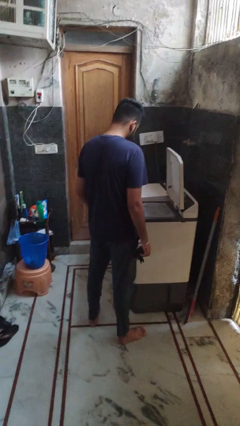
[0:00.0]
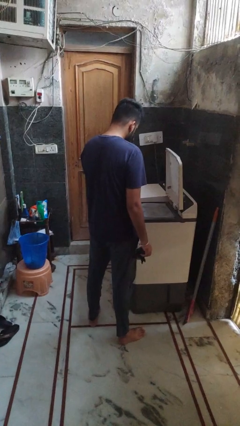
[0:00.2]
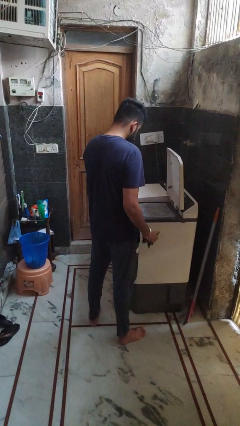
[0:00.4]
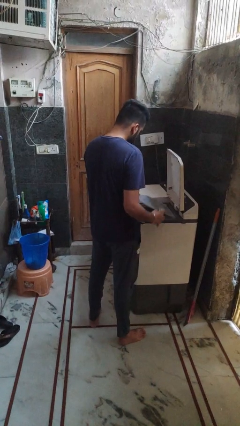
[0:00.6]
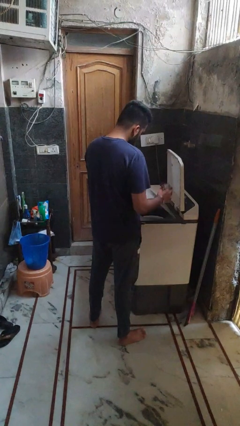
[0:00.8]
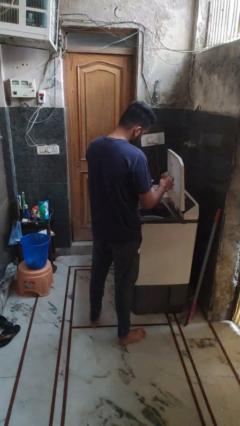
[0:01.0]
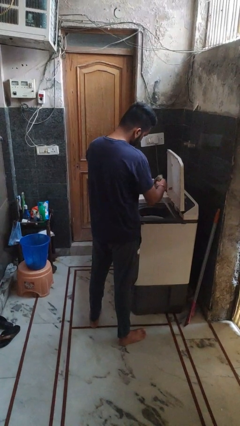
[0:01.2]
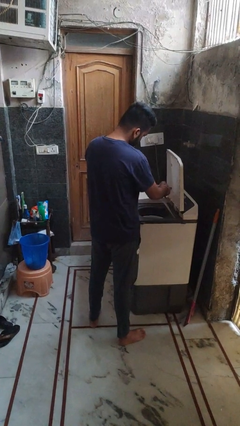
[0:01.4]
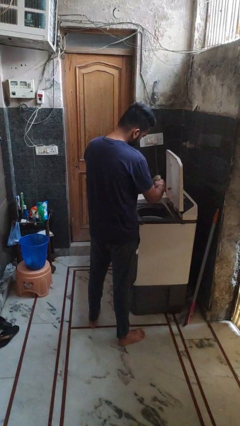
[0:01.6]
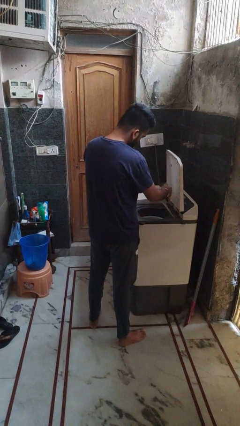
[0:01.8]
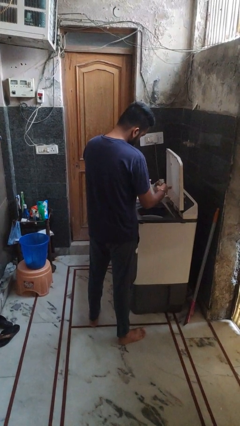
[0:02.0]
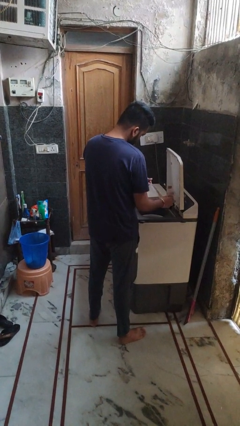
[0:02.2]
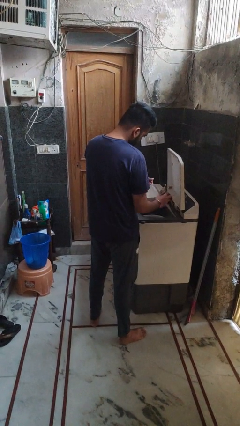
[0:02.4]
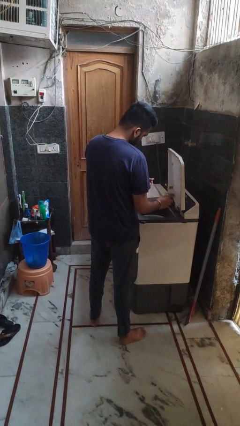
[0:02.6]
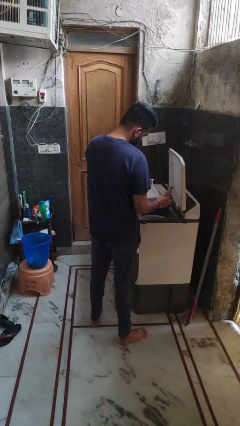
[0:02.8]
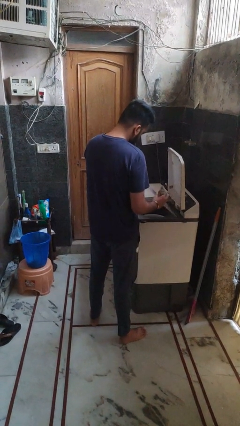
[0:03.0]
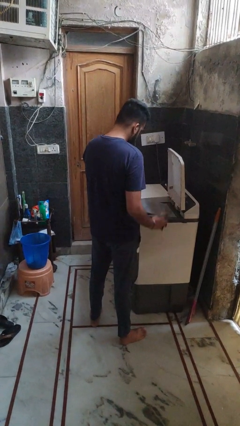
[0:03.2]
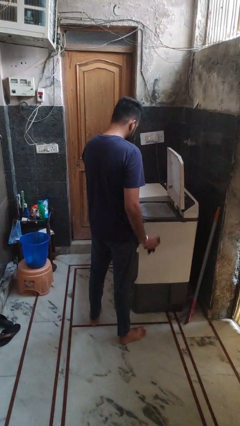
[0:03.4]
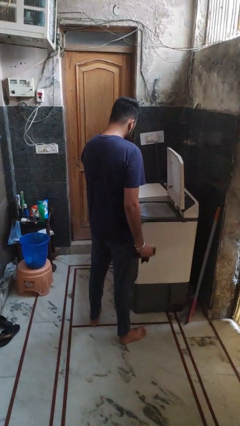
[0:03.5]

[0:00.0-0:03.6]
person cleans dryer lint trap

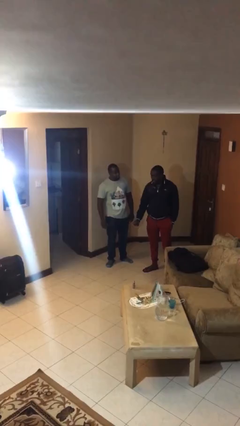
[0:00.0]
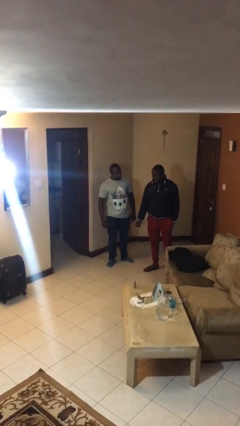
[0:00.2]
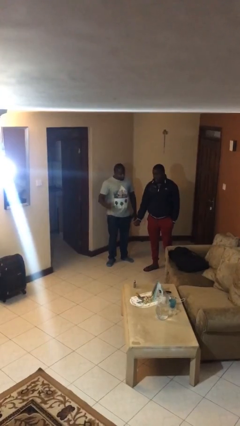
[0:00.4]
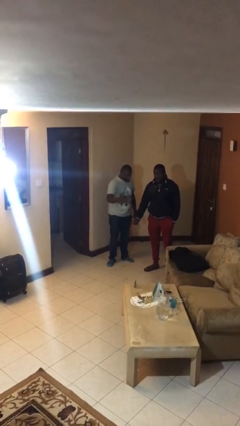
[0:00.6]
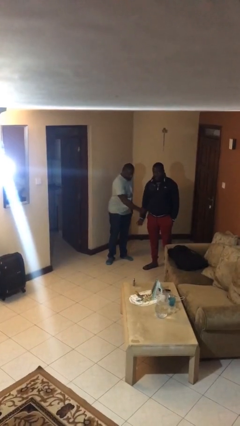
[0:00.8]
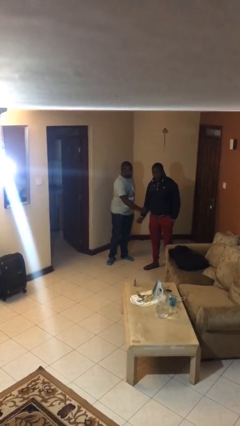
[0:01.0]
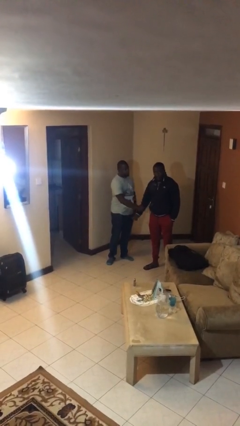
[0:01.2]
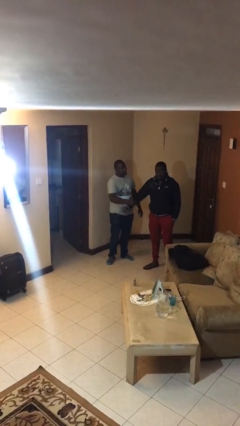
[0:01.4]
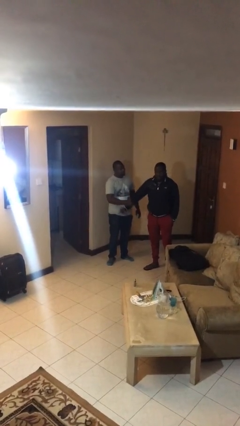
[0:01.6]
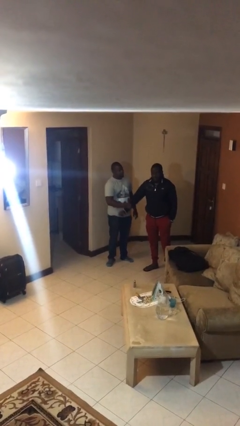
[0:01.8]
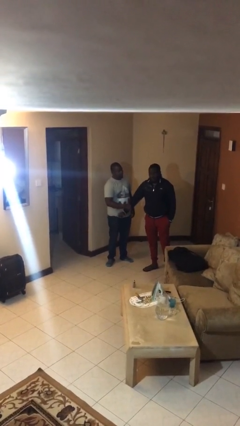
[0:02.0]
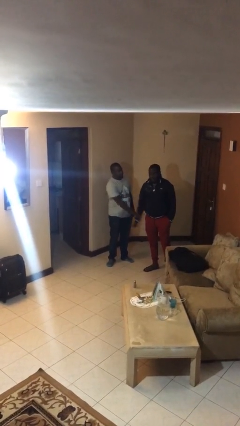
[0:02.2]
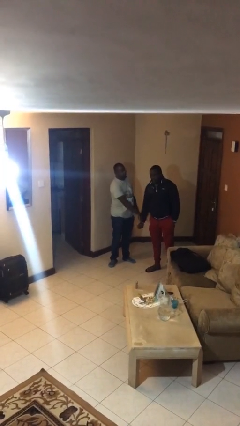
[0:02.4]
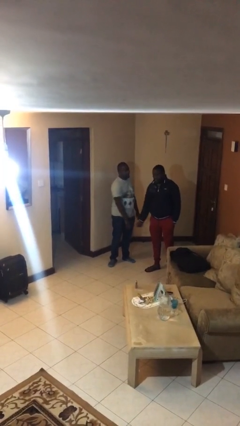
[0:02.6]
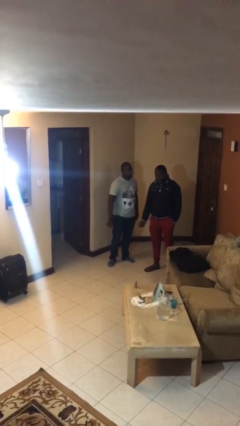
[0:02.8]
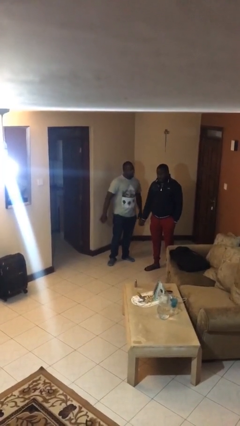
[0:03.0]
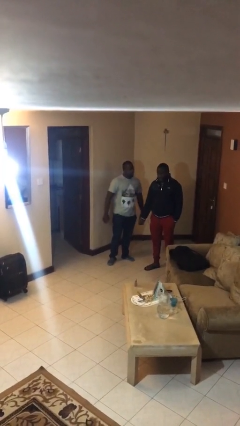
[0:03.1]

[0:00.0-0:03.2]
person grabs person by forearm

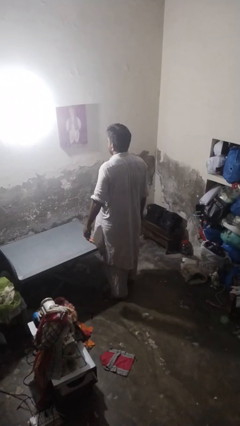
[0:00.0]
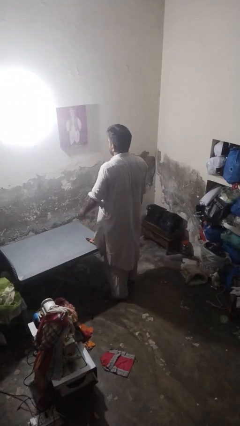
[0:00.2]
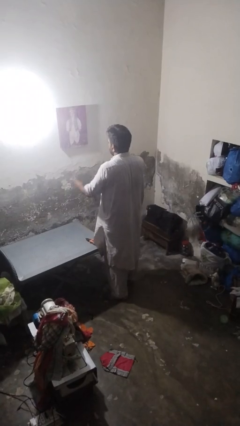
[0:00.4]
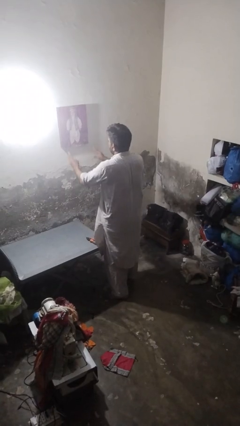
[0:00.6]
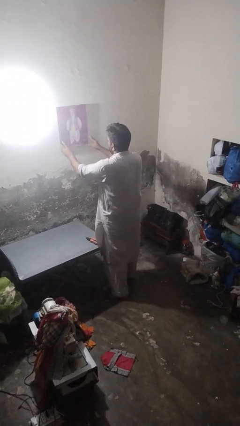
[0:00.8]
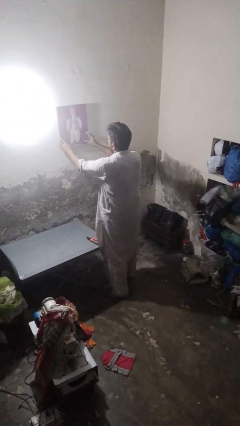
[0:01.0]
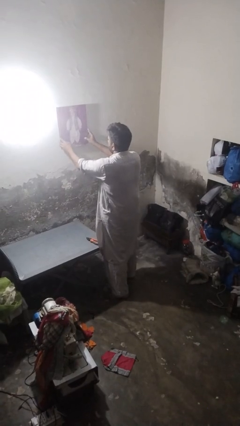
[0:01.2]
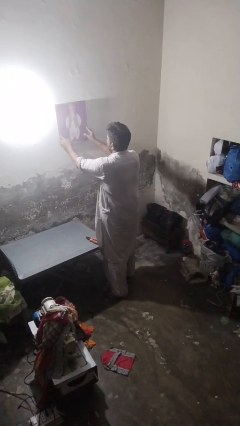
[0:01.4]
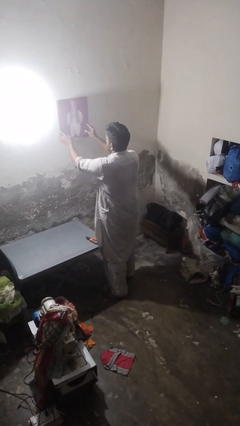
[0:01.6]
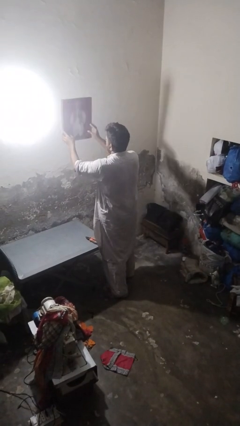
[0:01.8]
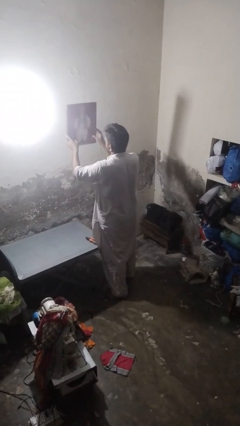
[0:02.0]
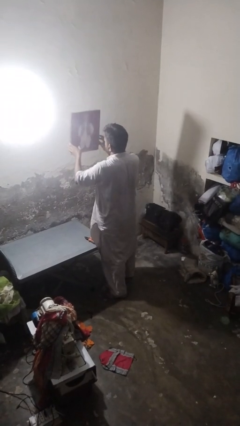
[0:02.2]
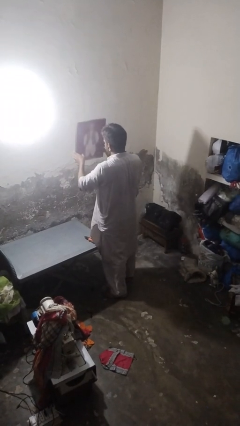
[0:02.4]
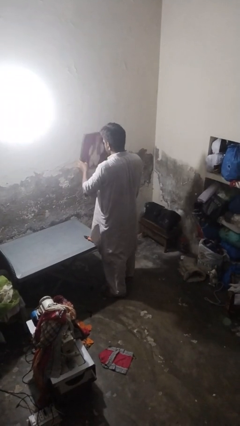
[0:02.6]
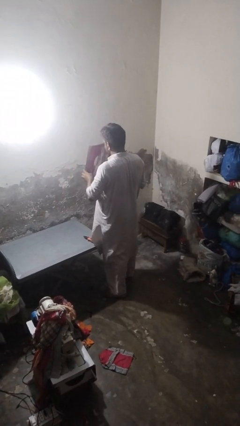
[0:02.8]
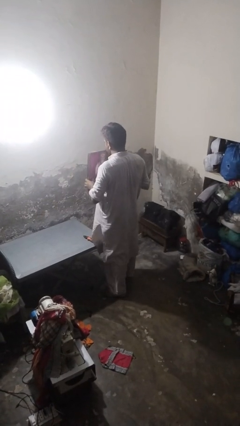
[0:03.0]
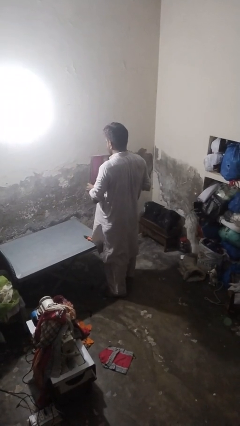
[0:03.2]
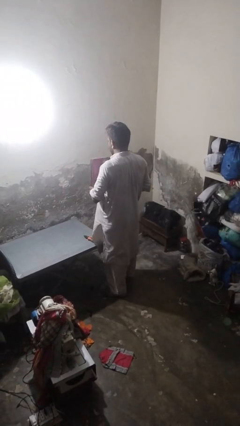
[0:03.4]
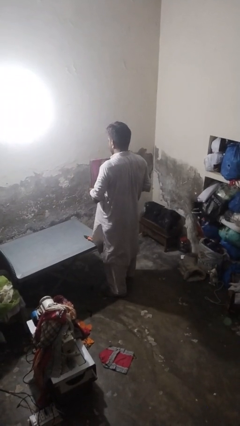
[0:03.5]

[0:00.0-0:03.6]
person takes down picture frame

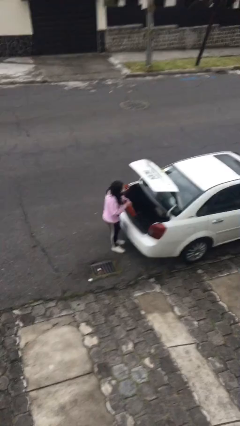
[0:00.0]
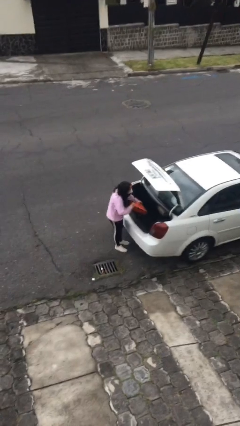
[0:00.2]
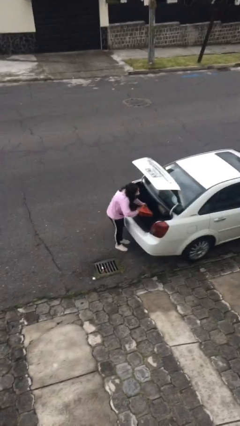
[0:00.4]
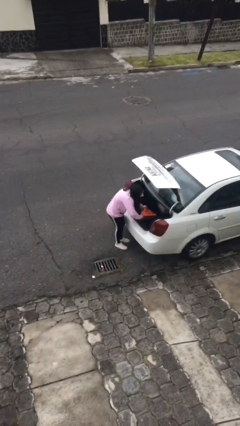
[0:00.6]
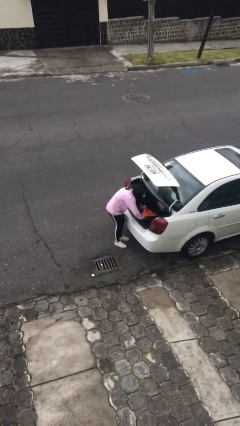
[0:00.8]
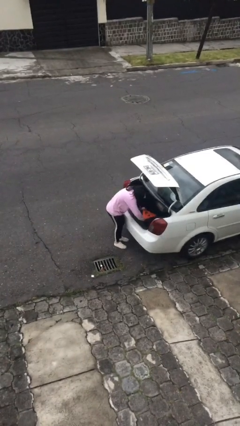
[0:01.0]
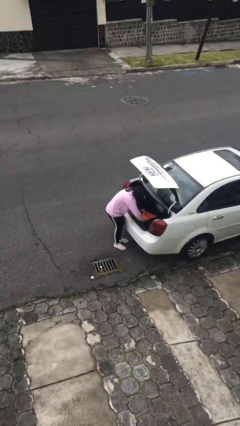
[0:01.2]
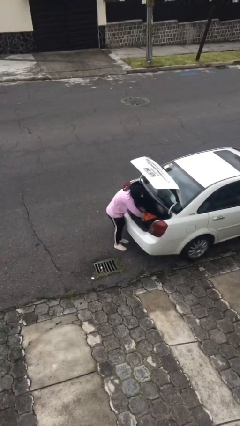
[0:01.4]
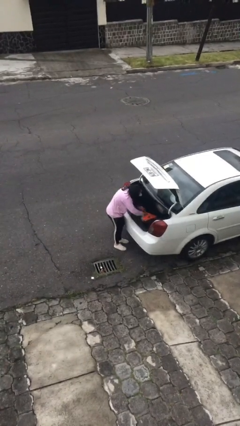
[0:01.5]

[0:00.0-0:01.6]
person loads car

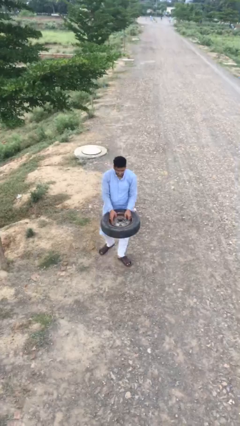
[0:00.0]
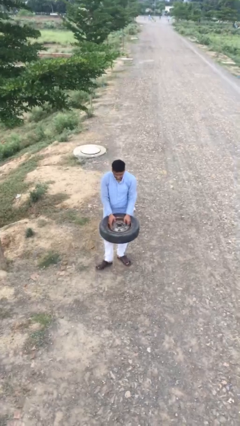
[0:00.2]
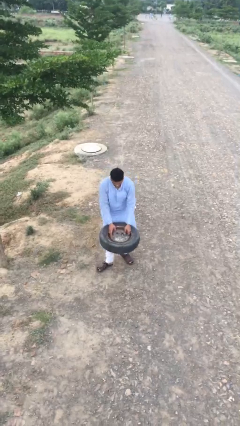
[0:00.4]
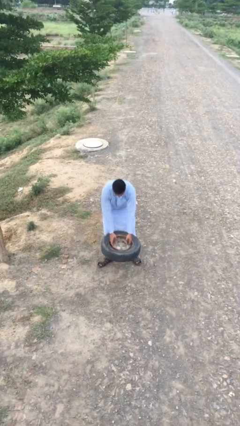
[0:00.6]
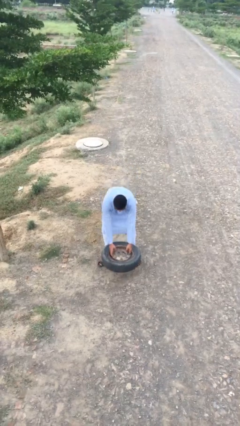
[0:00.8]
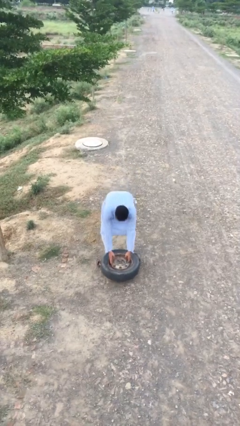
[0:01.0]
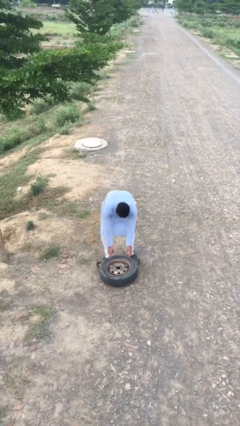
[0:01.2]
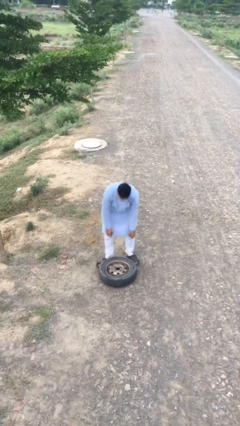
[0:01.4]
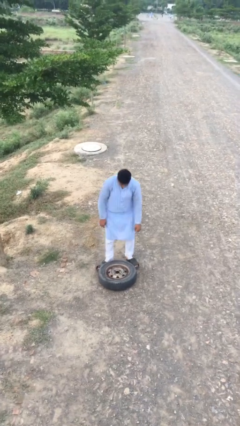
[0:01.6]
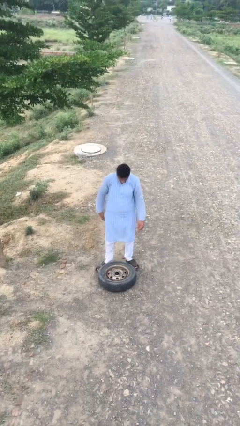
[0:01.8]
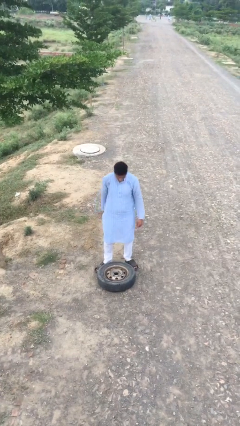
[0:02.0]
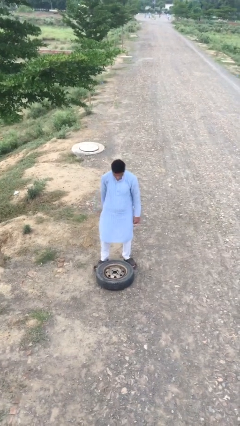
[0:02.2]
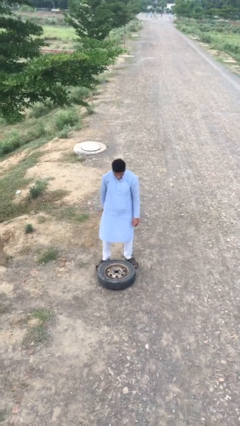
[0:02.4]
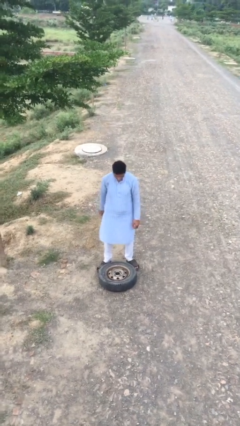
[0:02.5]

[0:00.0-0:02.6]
person puts down object on floor

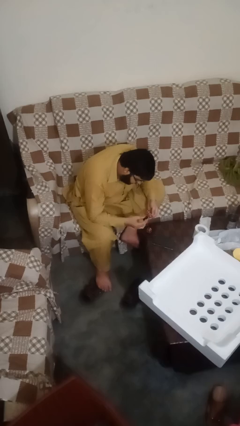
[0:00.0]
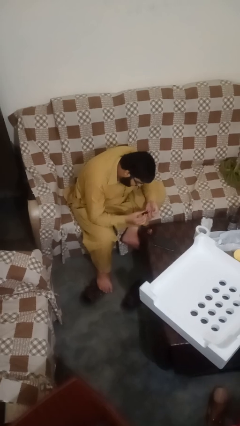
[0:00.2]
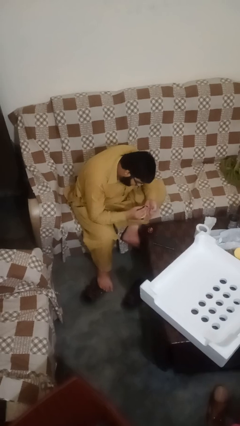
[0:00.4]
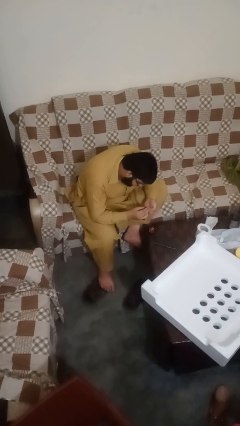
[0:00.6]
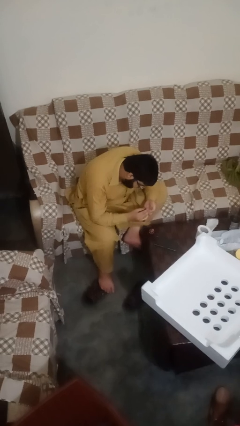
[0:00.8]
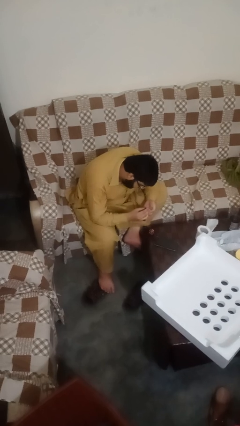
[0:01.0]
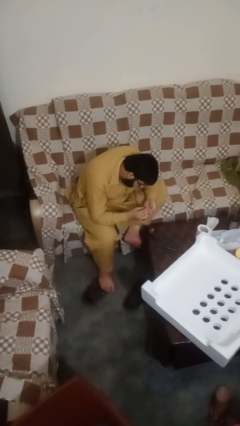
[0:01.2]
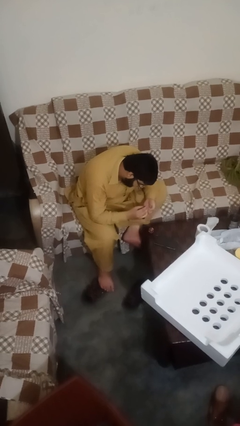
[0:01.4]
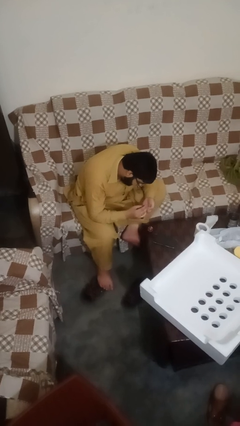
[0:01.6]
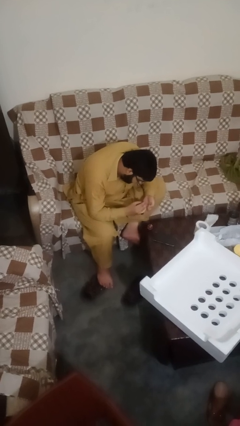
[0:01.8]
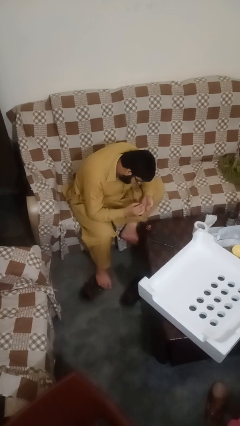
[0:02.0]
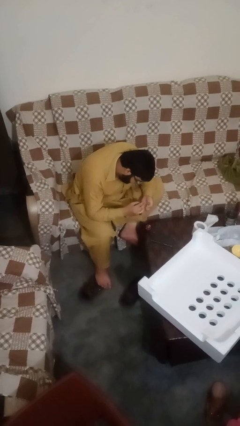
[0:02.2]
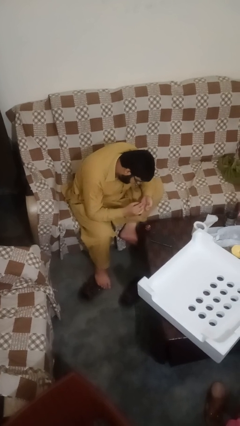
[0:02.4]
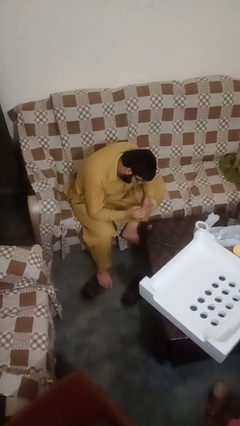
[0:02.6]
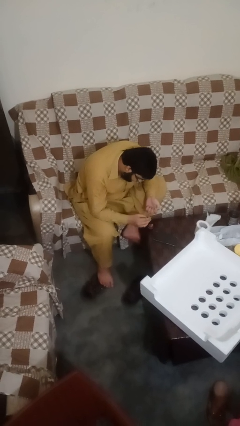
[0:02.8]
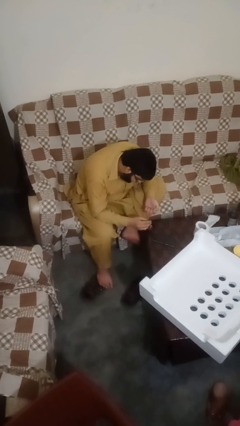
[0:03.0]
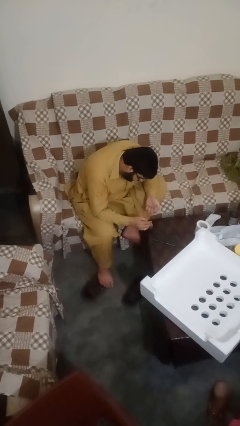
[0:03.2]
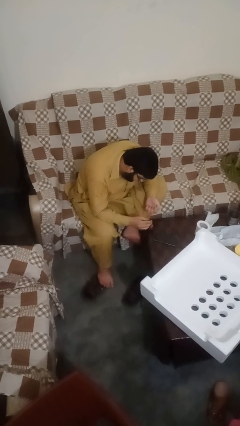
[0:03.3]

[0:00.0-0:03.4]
person paints fingernails
